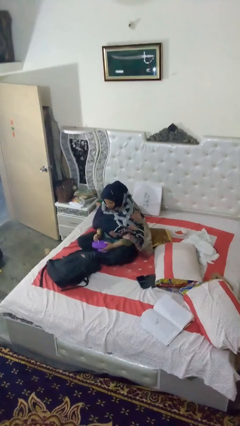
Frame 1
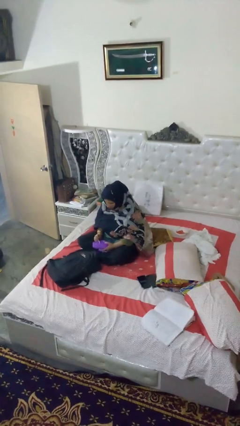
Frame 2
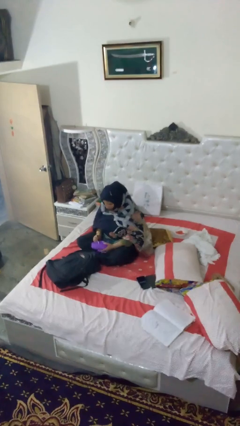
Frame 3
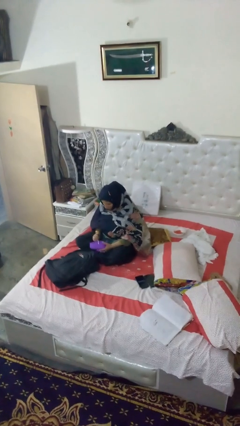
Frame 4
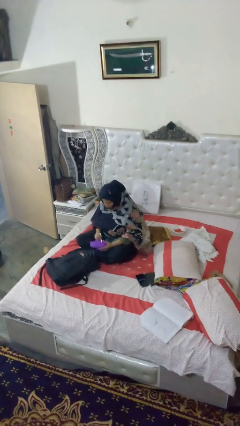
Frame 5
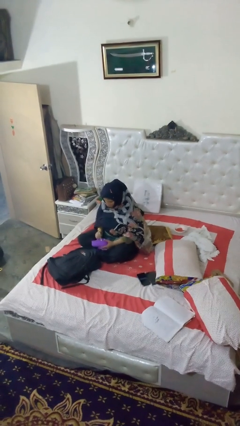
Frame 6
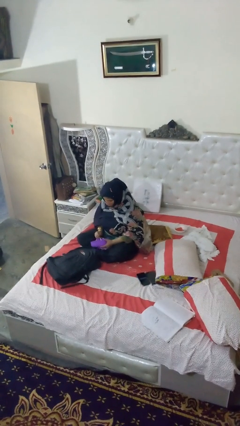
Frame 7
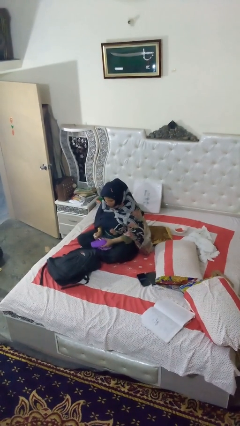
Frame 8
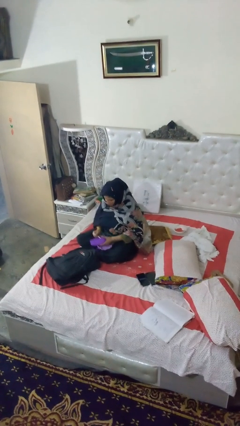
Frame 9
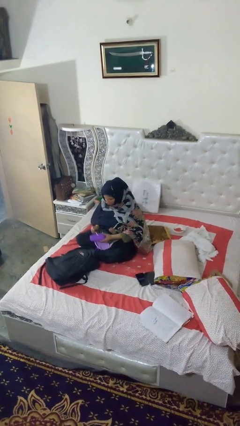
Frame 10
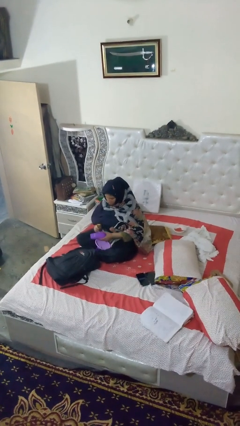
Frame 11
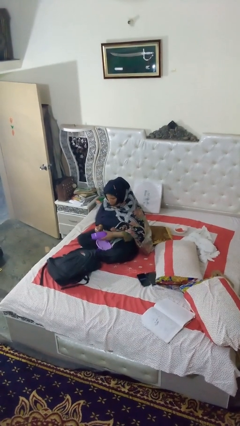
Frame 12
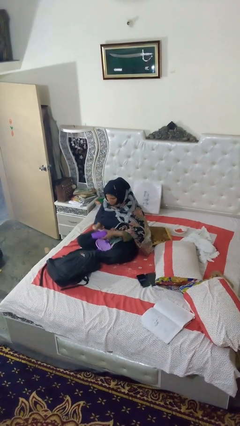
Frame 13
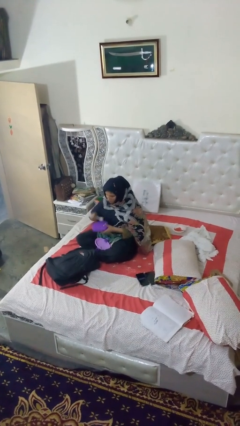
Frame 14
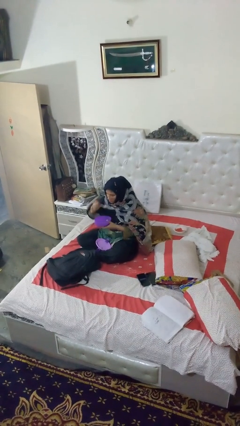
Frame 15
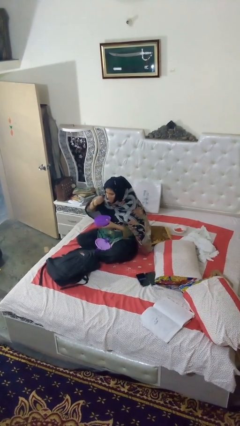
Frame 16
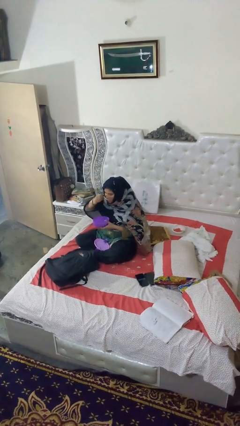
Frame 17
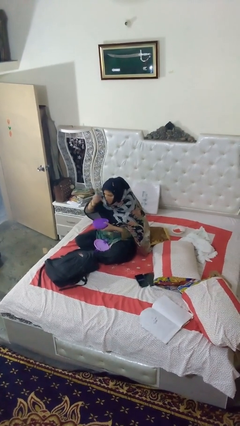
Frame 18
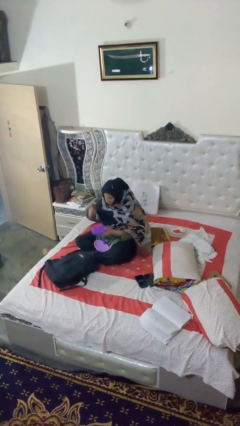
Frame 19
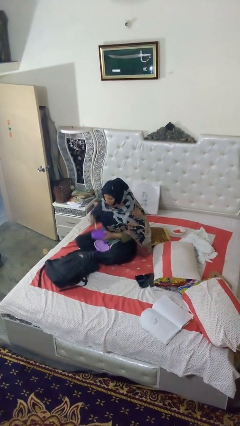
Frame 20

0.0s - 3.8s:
person eats snack from bag

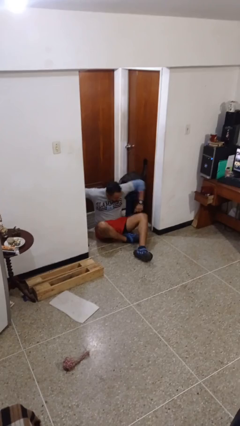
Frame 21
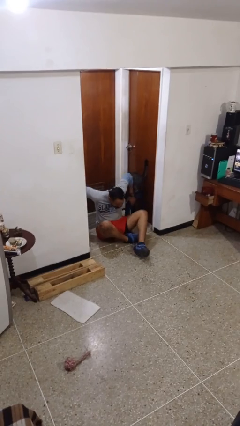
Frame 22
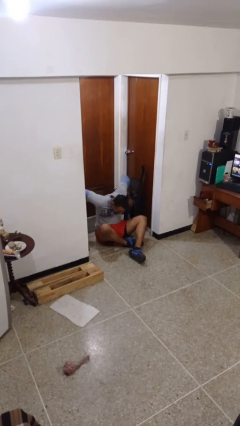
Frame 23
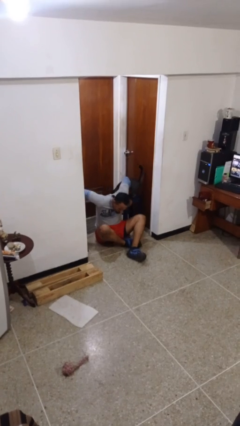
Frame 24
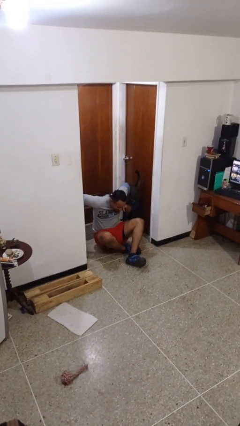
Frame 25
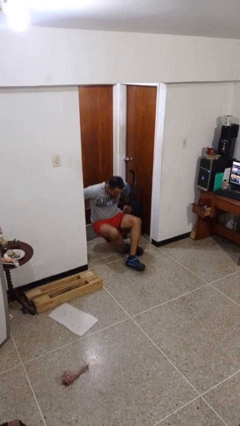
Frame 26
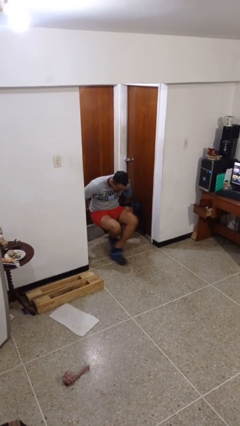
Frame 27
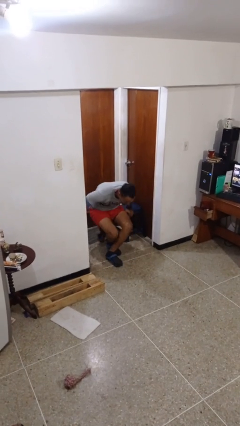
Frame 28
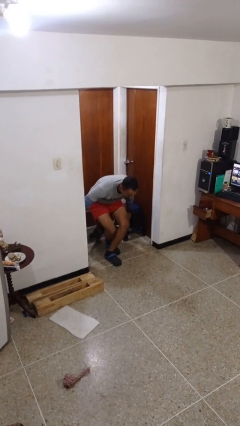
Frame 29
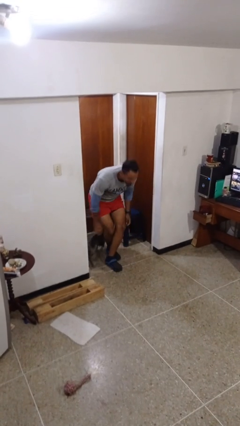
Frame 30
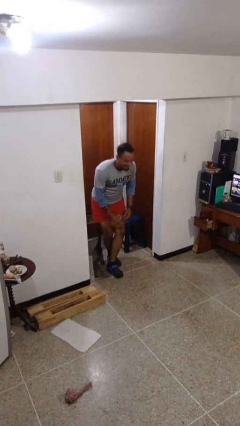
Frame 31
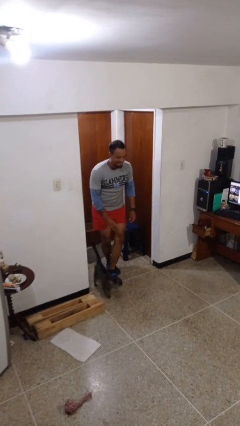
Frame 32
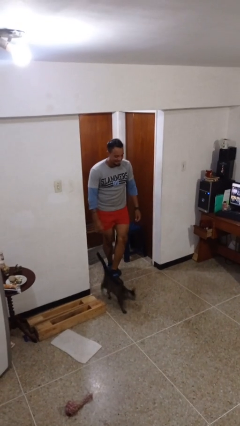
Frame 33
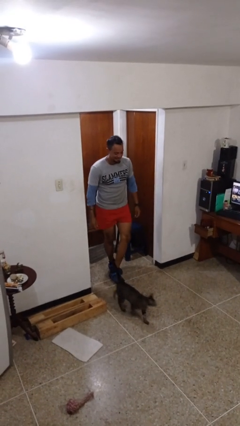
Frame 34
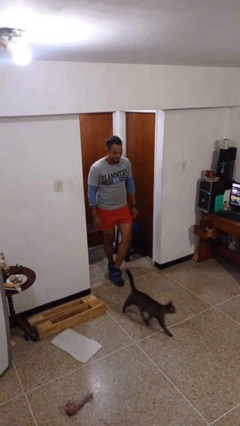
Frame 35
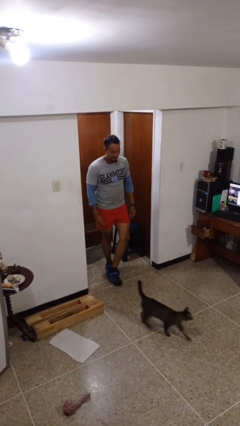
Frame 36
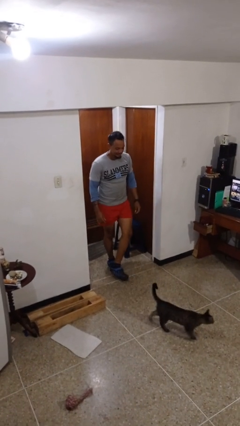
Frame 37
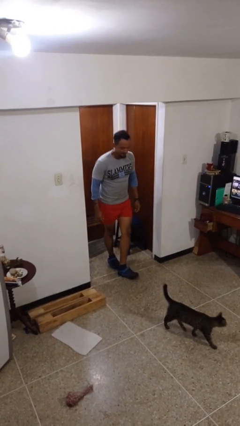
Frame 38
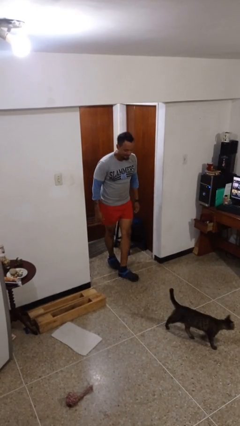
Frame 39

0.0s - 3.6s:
person stands up from floor

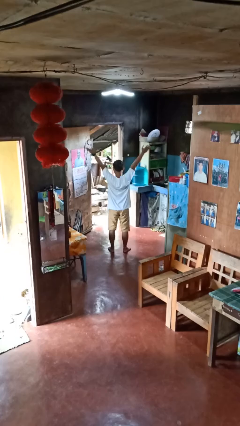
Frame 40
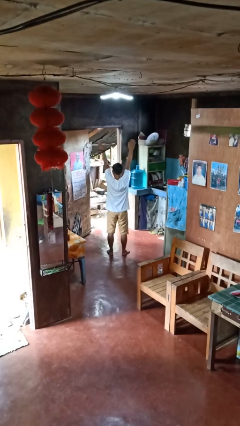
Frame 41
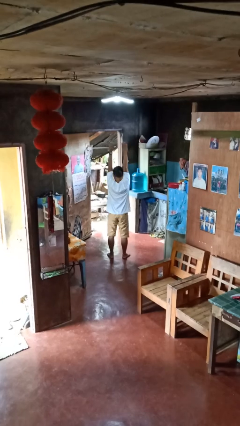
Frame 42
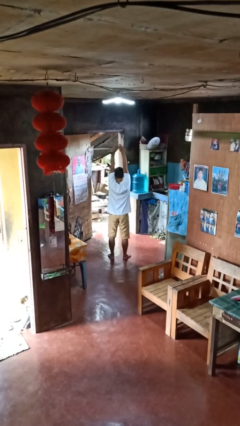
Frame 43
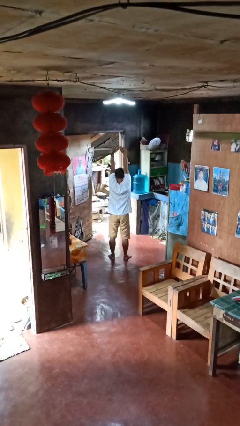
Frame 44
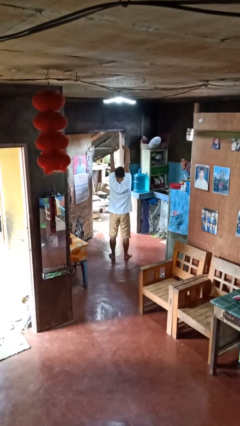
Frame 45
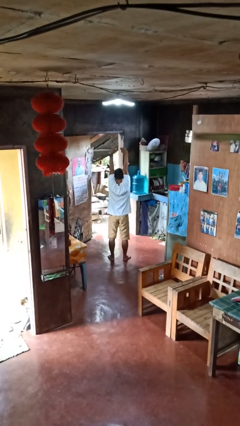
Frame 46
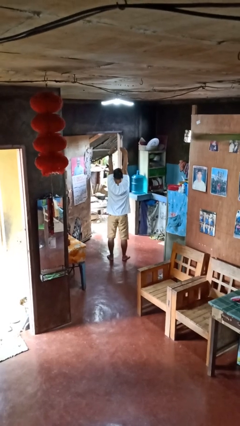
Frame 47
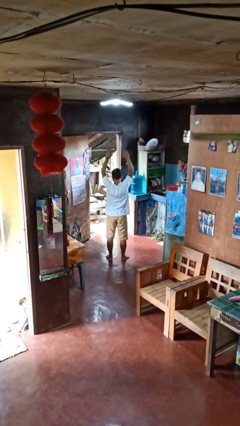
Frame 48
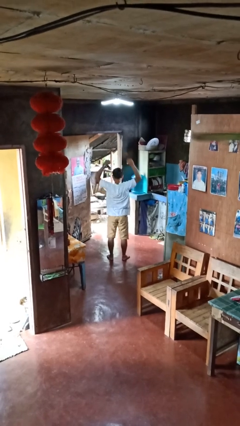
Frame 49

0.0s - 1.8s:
person stretches arms over head

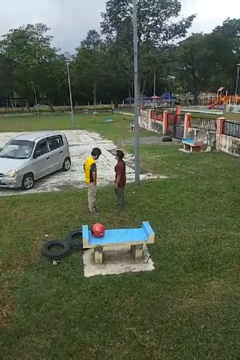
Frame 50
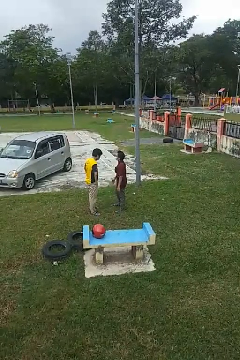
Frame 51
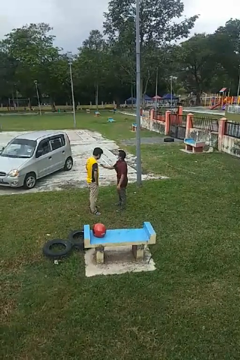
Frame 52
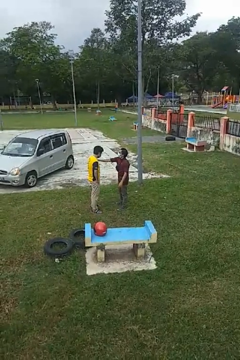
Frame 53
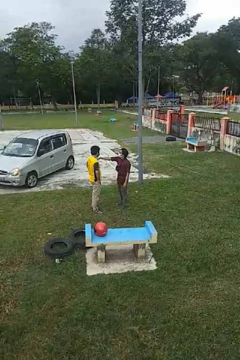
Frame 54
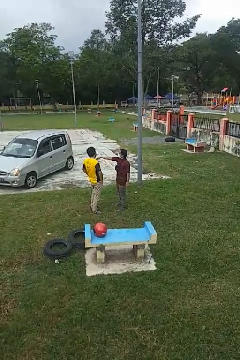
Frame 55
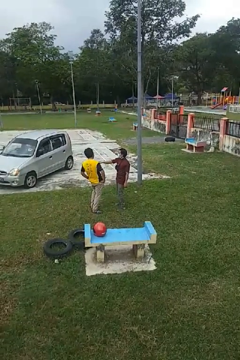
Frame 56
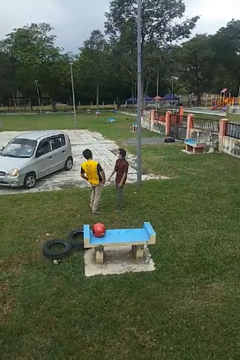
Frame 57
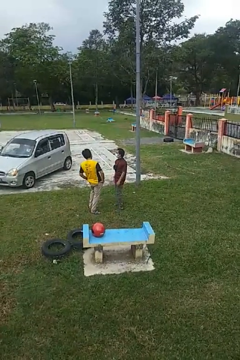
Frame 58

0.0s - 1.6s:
person shoves person

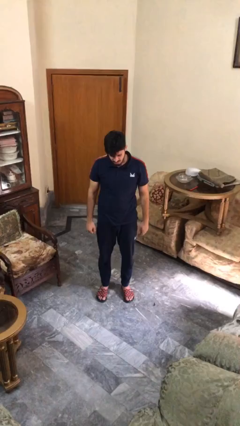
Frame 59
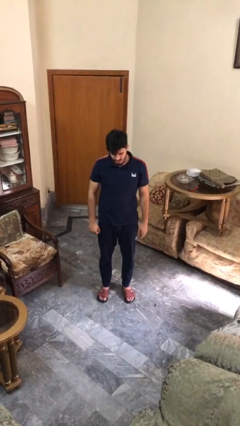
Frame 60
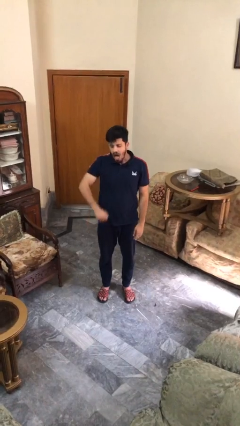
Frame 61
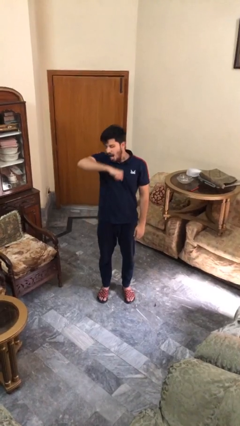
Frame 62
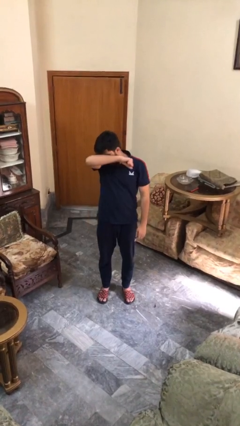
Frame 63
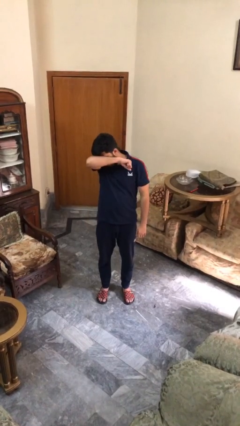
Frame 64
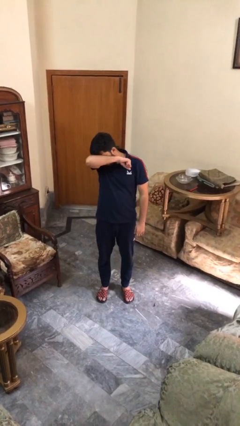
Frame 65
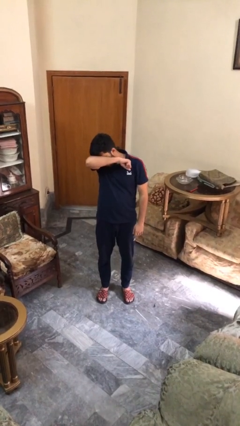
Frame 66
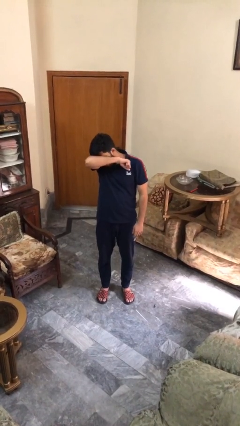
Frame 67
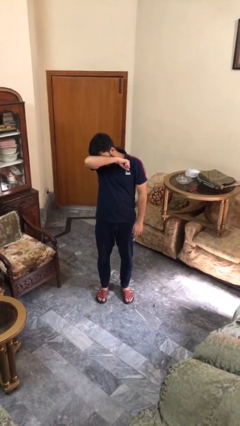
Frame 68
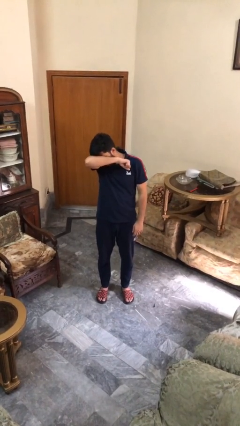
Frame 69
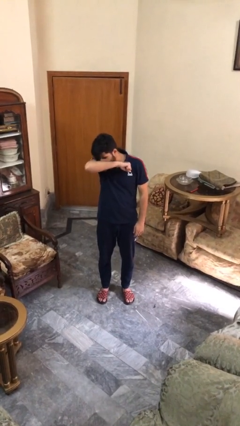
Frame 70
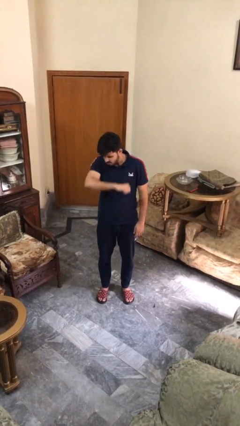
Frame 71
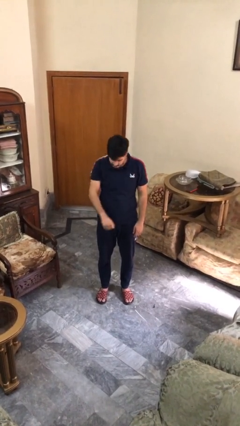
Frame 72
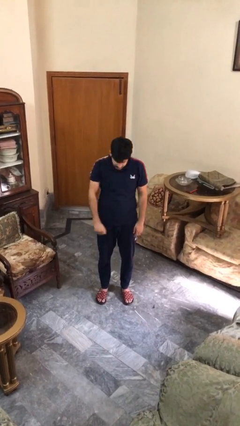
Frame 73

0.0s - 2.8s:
person sneezes into arm

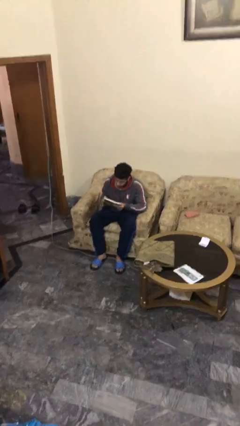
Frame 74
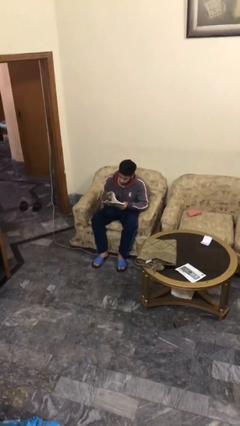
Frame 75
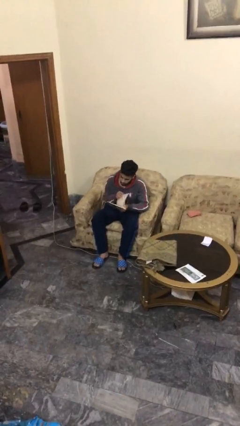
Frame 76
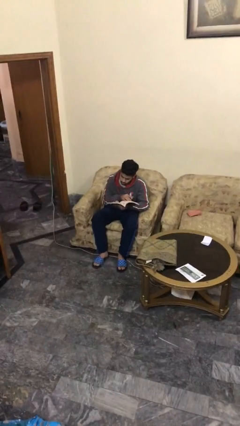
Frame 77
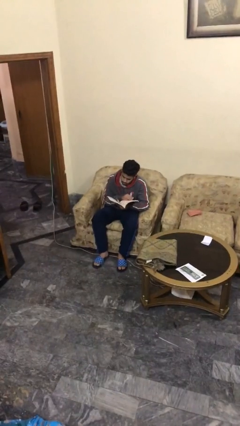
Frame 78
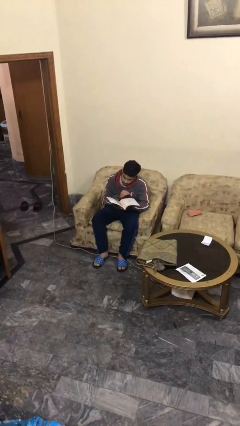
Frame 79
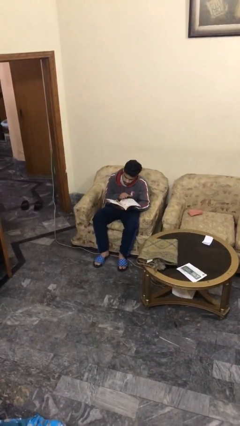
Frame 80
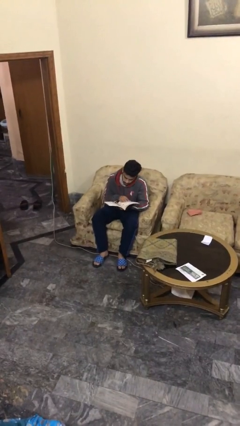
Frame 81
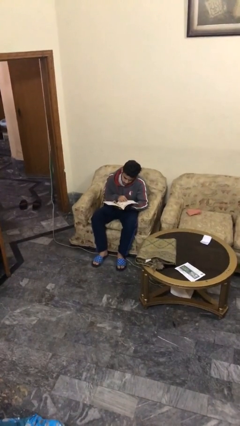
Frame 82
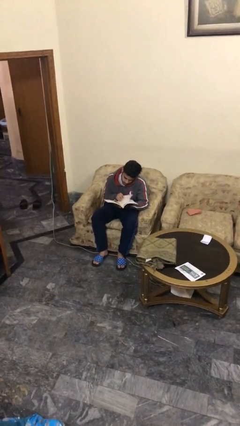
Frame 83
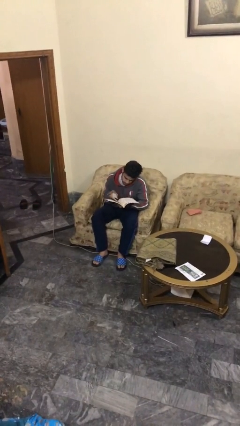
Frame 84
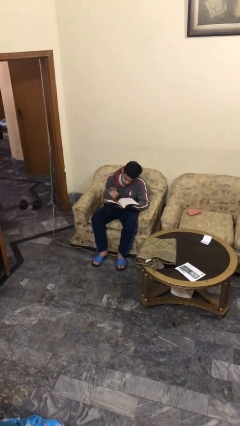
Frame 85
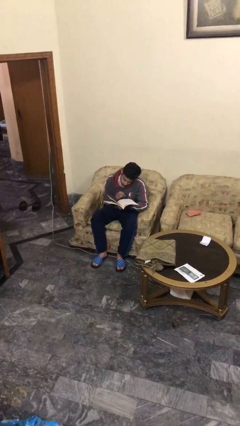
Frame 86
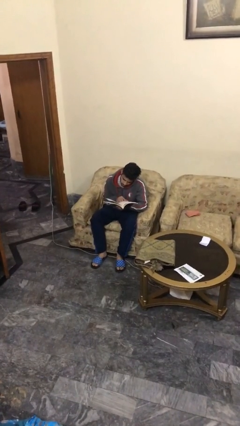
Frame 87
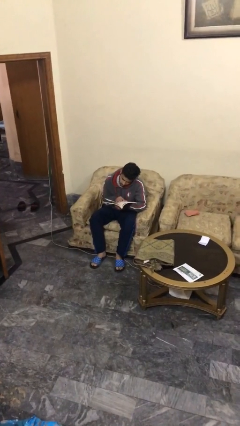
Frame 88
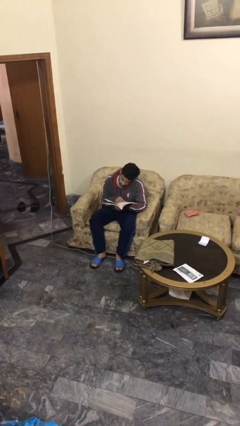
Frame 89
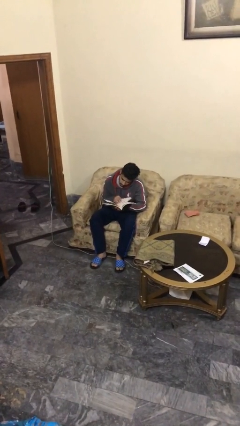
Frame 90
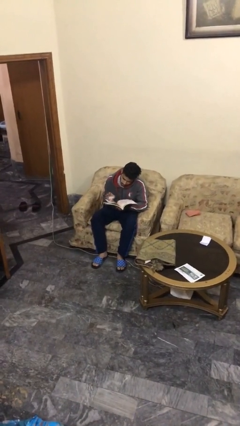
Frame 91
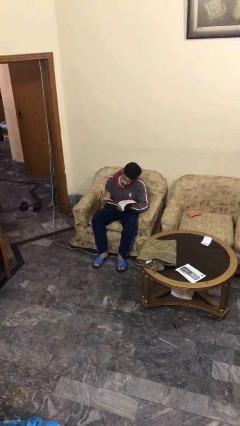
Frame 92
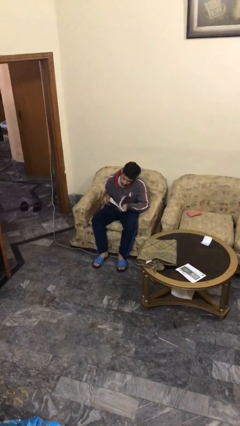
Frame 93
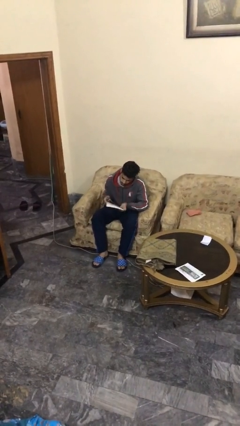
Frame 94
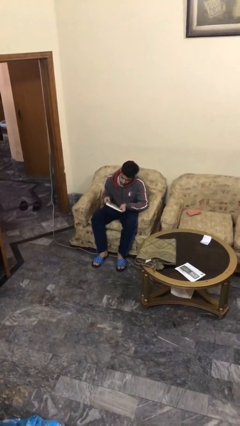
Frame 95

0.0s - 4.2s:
person reads document
